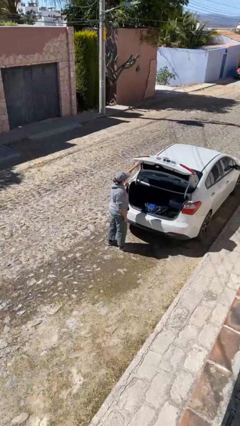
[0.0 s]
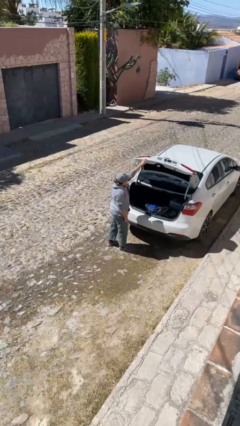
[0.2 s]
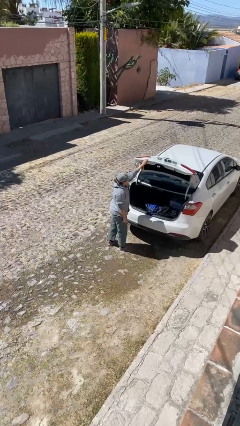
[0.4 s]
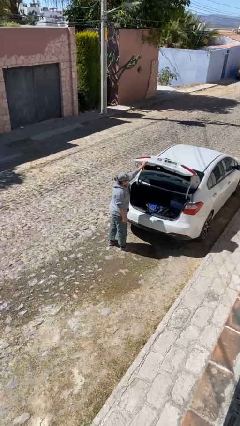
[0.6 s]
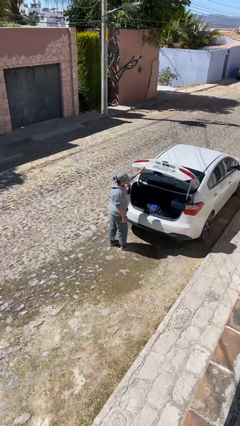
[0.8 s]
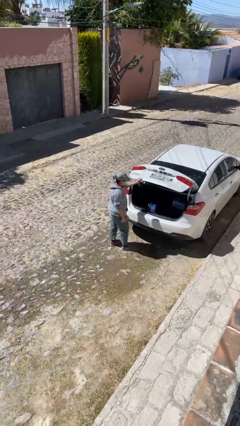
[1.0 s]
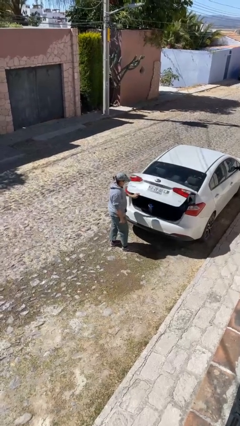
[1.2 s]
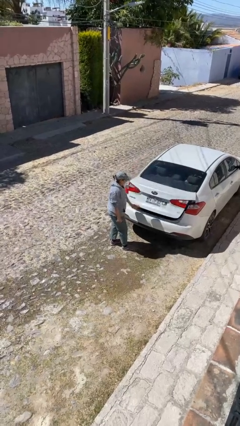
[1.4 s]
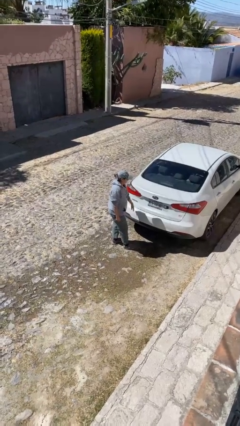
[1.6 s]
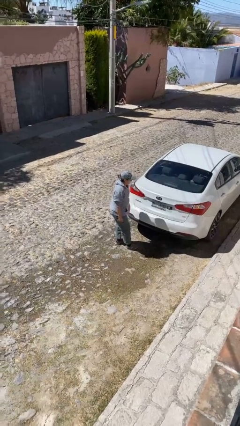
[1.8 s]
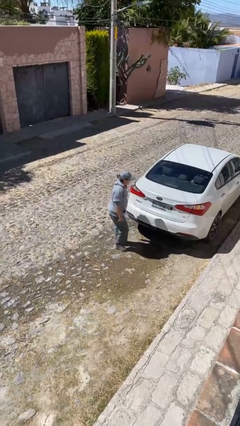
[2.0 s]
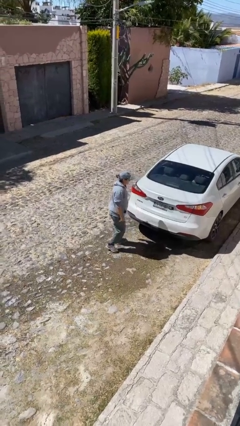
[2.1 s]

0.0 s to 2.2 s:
person closes car trunk

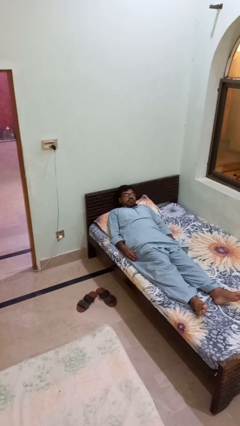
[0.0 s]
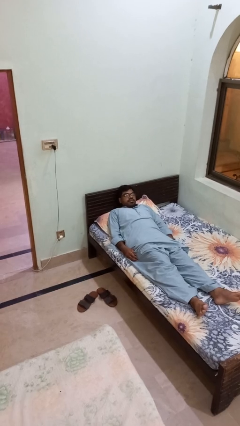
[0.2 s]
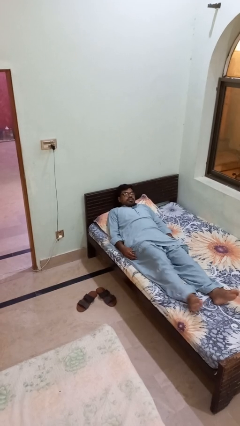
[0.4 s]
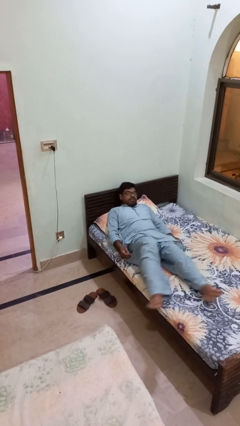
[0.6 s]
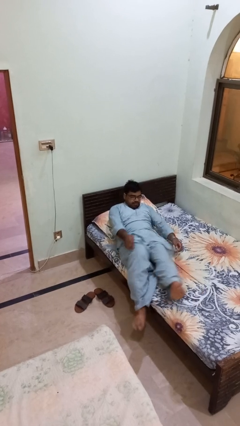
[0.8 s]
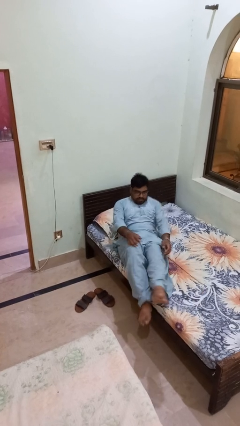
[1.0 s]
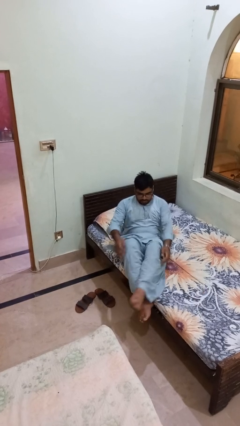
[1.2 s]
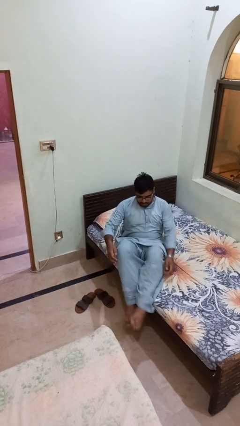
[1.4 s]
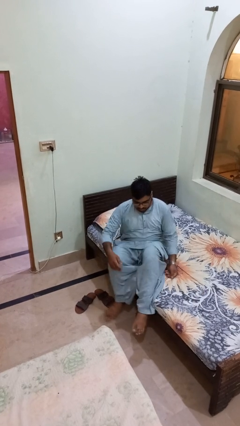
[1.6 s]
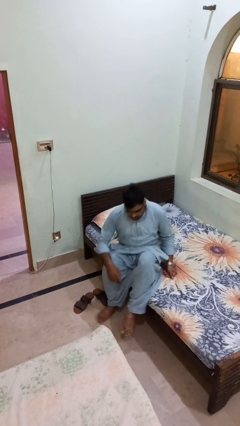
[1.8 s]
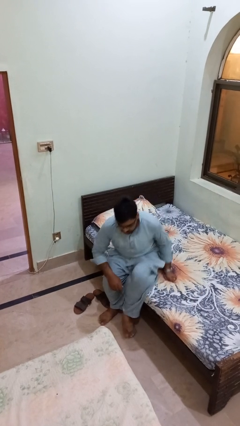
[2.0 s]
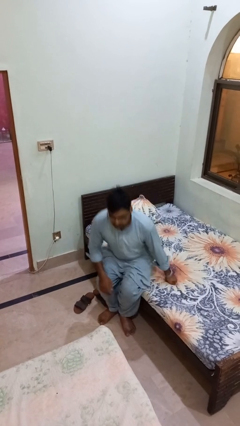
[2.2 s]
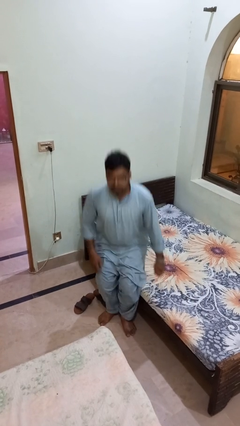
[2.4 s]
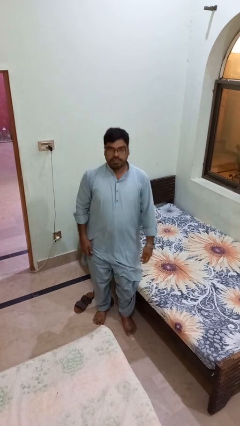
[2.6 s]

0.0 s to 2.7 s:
person stands up

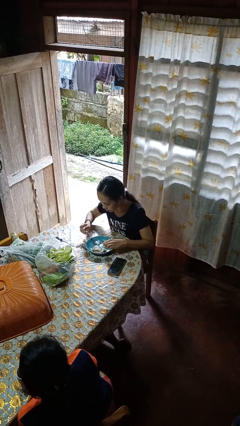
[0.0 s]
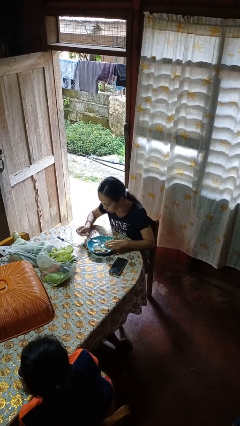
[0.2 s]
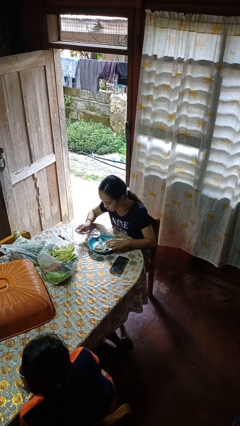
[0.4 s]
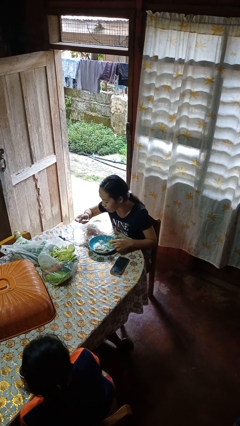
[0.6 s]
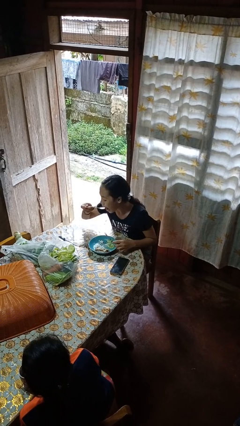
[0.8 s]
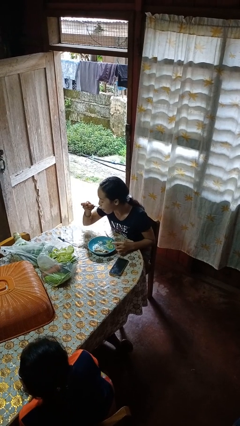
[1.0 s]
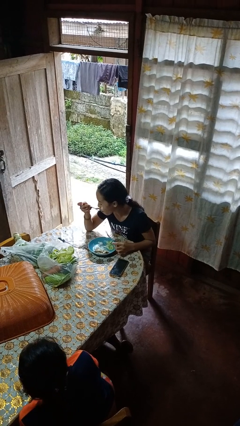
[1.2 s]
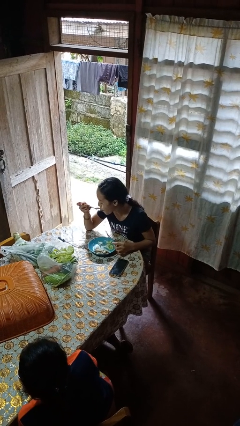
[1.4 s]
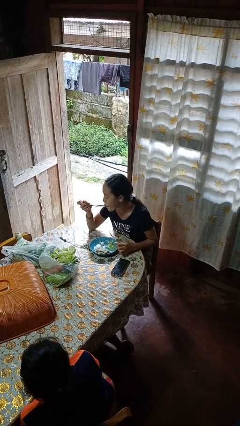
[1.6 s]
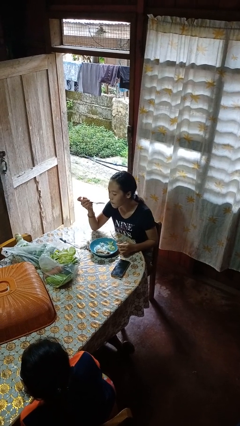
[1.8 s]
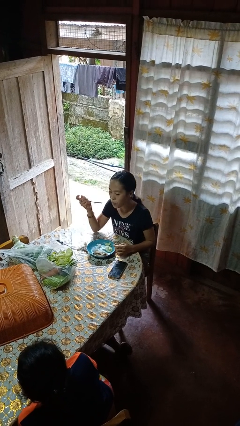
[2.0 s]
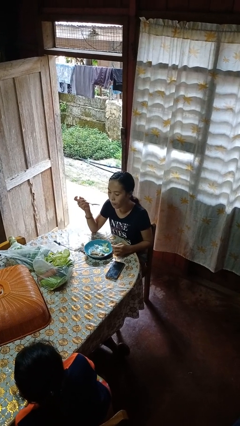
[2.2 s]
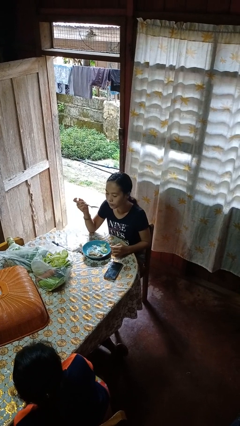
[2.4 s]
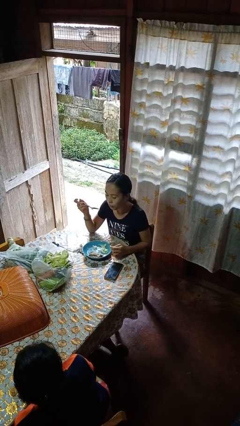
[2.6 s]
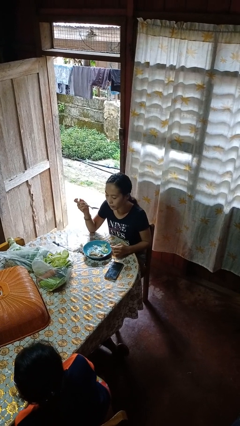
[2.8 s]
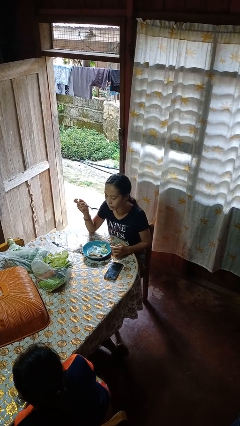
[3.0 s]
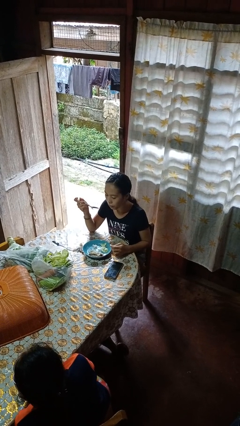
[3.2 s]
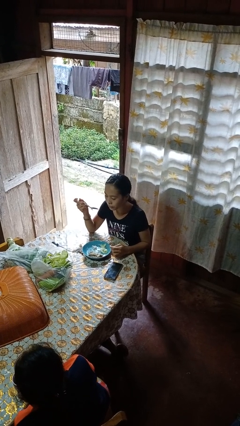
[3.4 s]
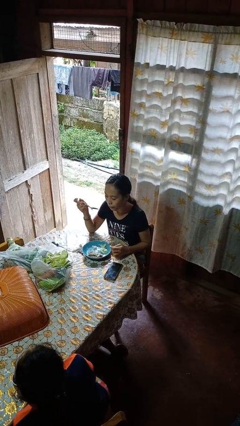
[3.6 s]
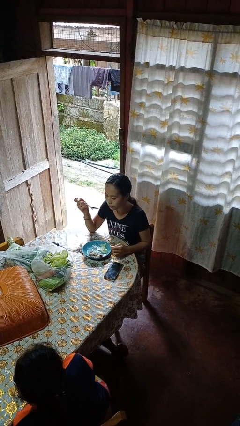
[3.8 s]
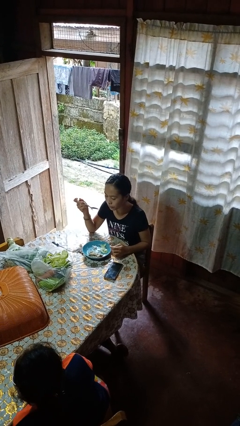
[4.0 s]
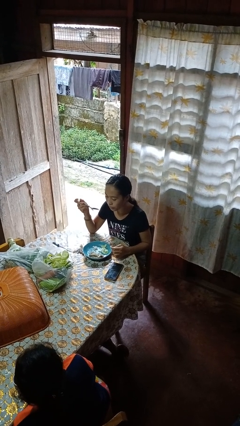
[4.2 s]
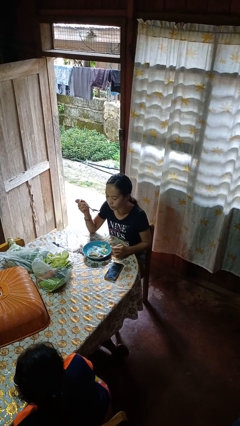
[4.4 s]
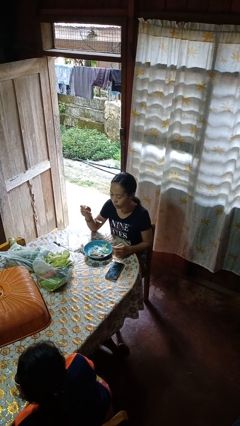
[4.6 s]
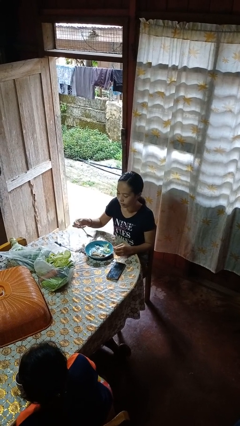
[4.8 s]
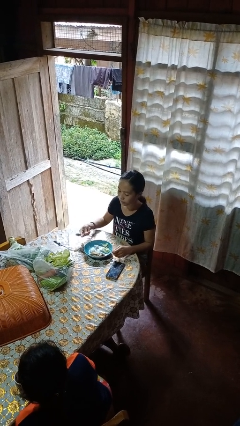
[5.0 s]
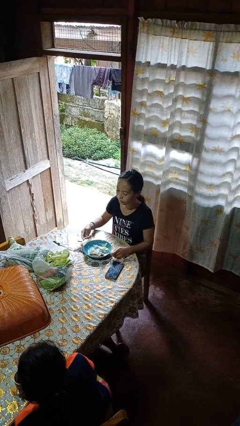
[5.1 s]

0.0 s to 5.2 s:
person eats with utensil

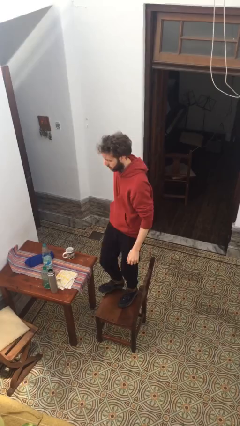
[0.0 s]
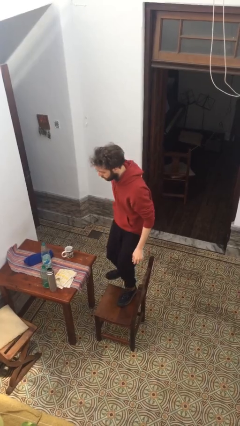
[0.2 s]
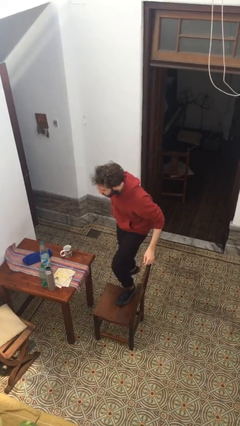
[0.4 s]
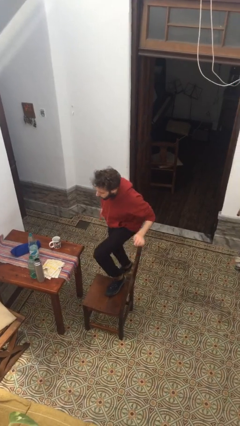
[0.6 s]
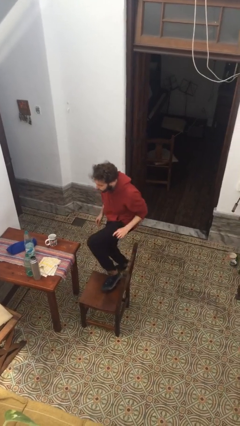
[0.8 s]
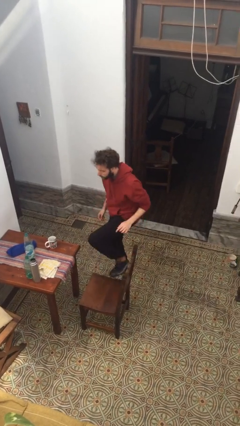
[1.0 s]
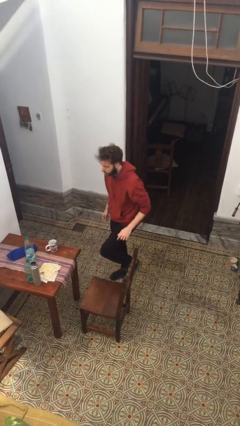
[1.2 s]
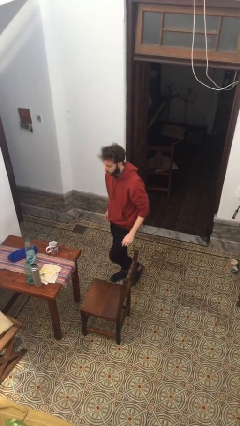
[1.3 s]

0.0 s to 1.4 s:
person climbs off chair

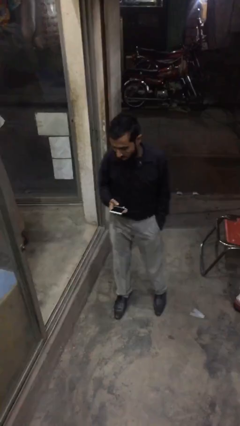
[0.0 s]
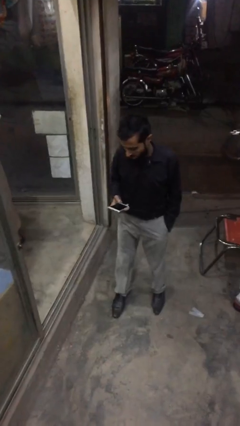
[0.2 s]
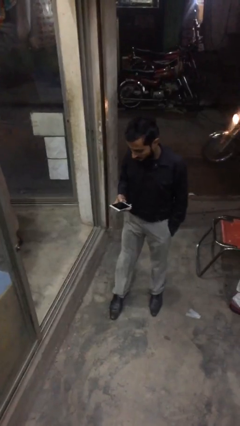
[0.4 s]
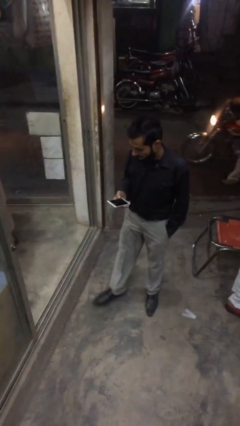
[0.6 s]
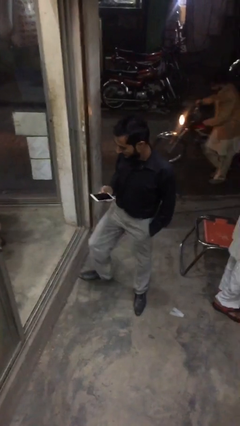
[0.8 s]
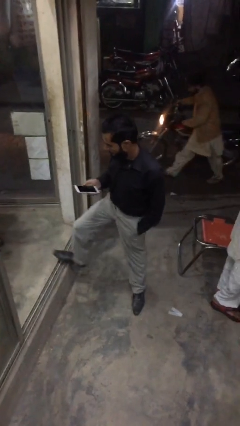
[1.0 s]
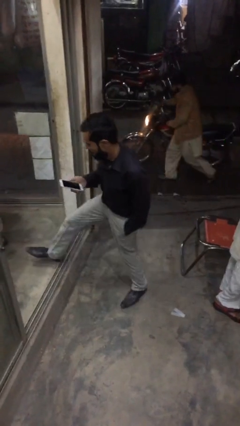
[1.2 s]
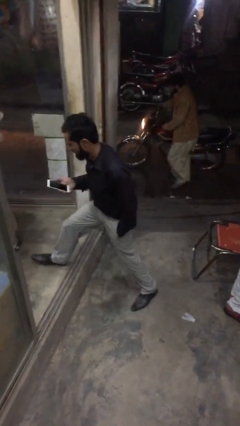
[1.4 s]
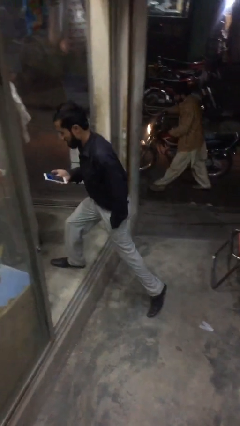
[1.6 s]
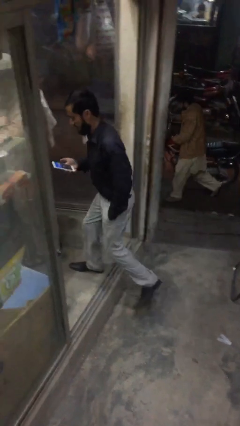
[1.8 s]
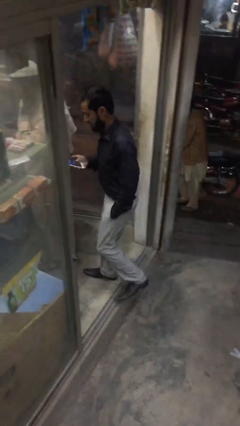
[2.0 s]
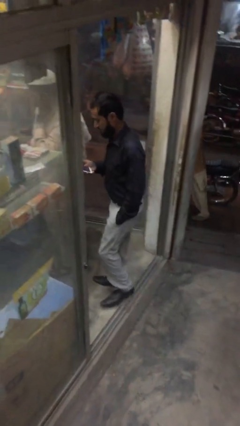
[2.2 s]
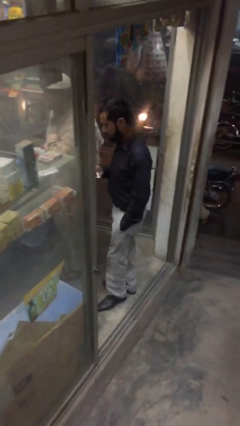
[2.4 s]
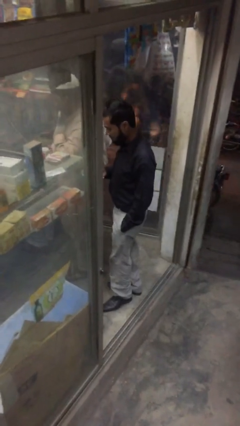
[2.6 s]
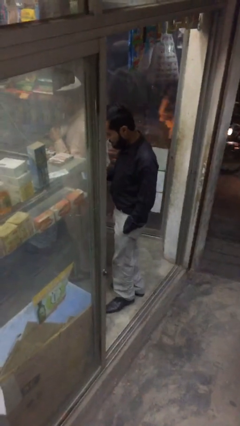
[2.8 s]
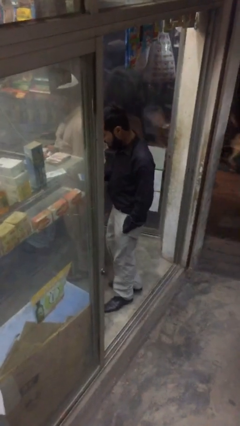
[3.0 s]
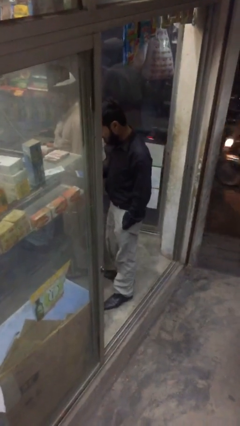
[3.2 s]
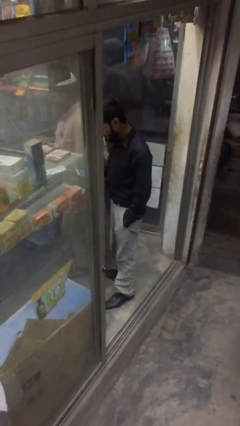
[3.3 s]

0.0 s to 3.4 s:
person enters scene through structure

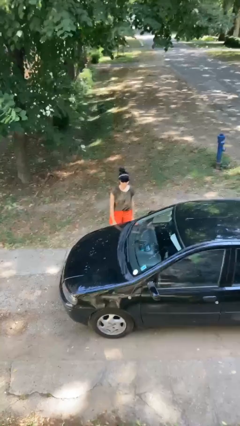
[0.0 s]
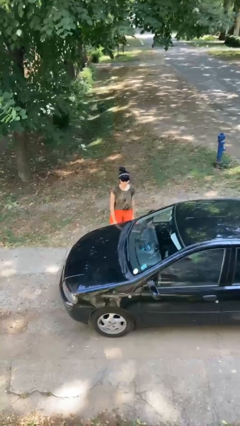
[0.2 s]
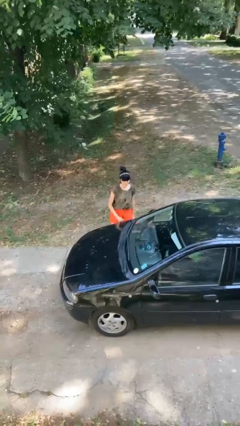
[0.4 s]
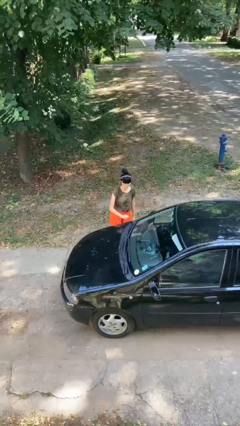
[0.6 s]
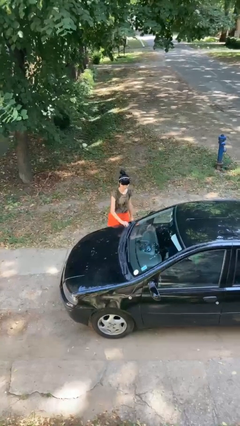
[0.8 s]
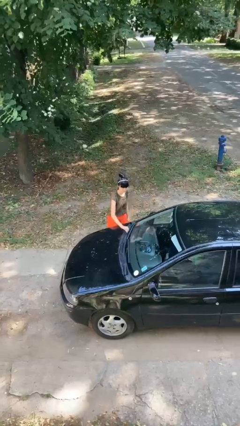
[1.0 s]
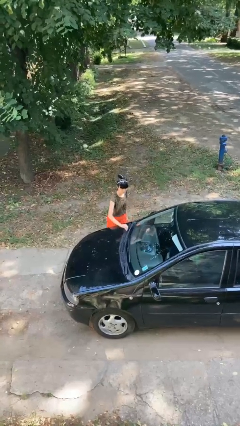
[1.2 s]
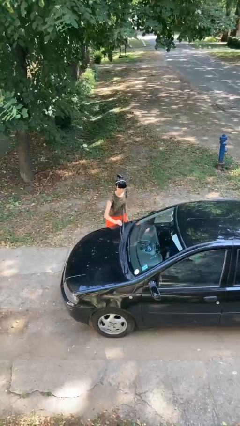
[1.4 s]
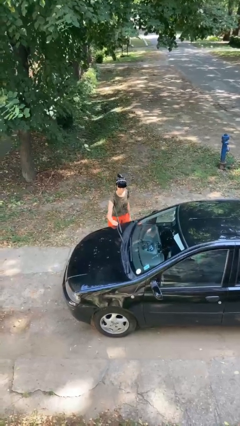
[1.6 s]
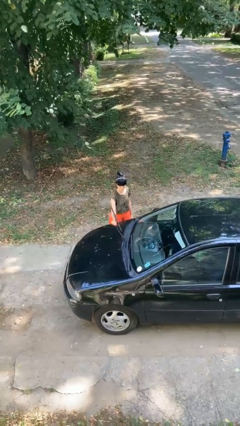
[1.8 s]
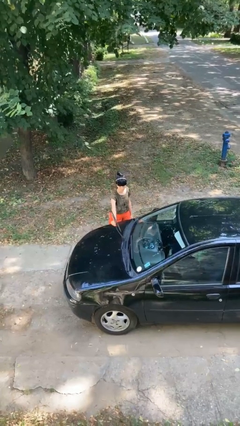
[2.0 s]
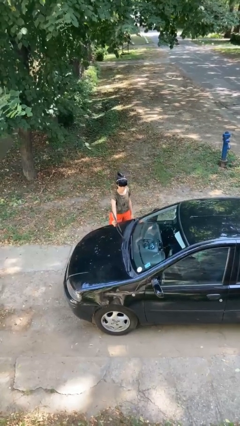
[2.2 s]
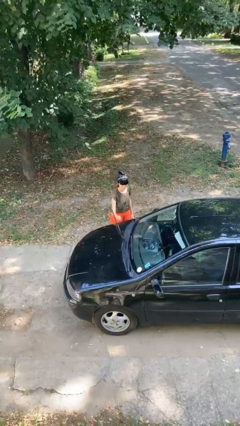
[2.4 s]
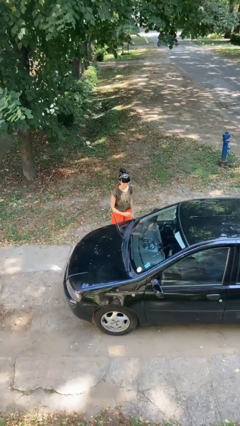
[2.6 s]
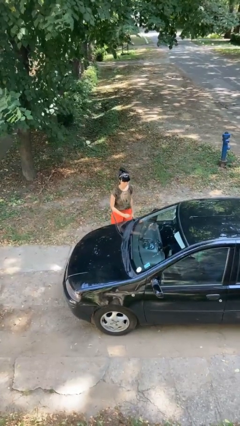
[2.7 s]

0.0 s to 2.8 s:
person flips up car wipers
